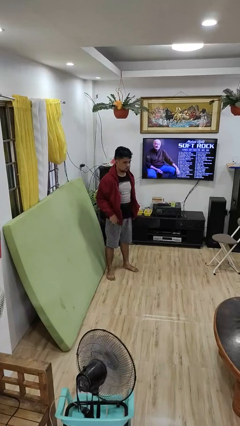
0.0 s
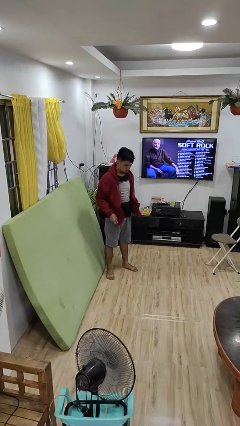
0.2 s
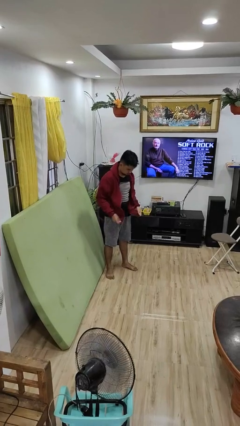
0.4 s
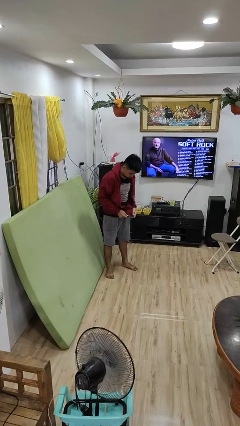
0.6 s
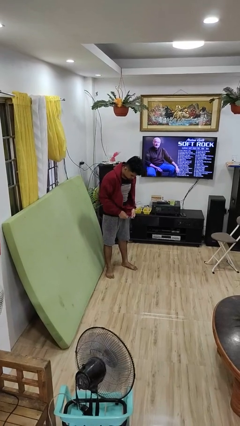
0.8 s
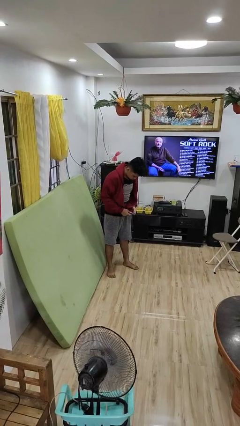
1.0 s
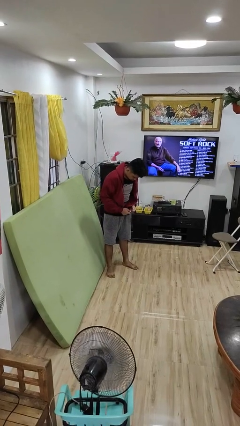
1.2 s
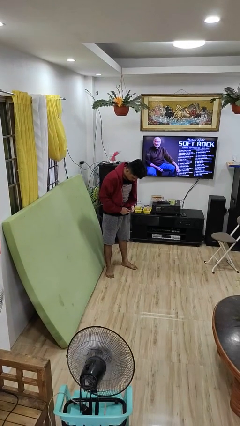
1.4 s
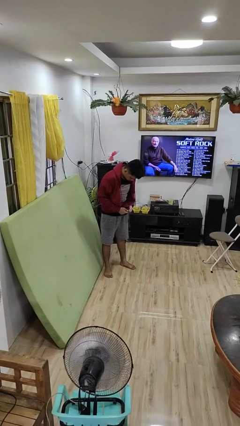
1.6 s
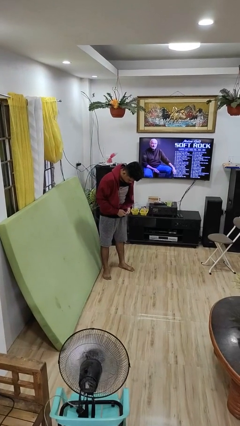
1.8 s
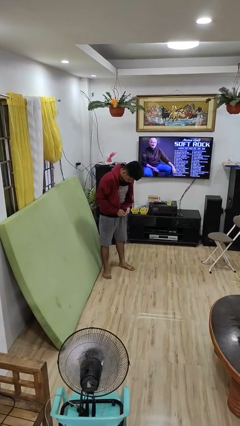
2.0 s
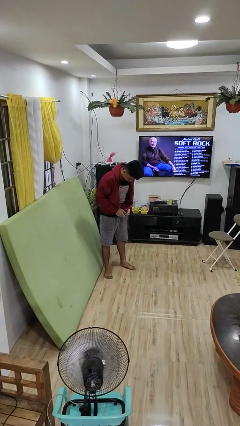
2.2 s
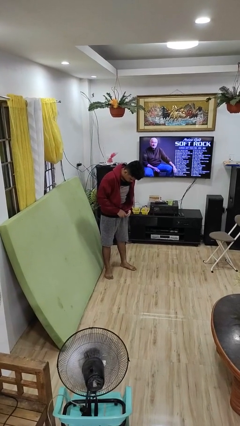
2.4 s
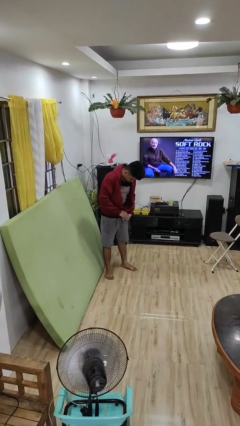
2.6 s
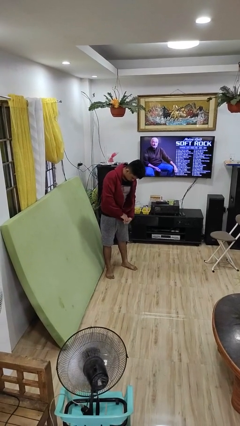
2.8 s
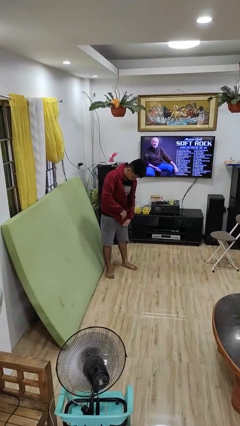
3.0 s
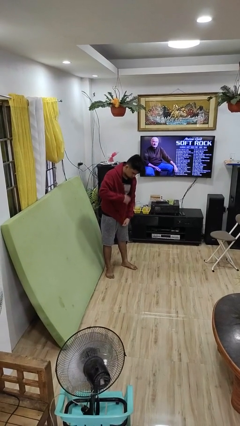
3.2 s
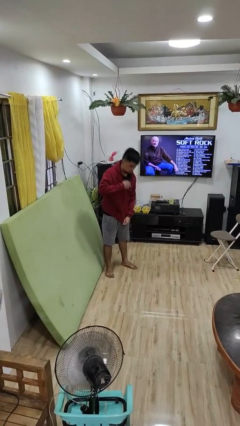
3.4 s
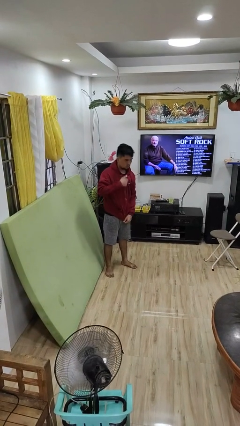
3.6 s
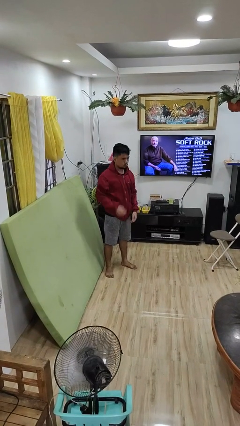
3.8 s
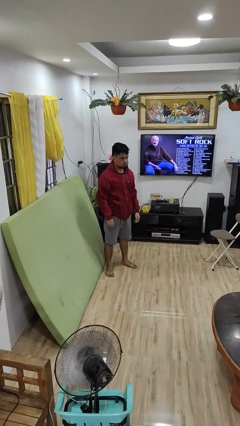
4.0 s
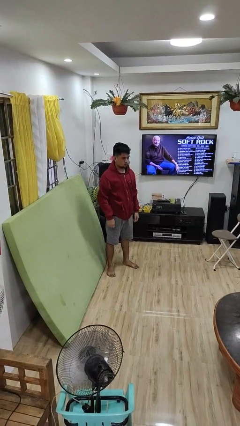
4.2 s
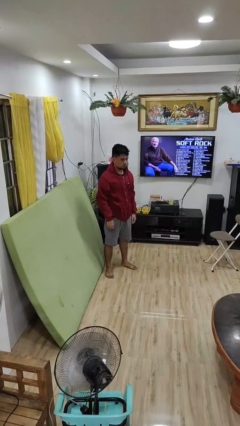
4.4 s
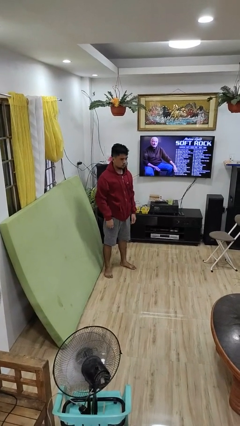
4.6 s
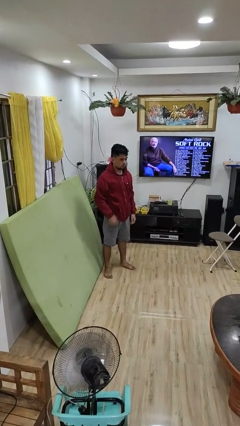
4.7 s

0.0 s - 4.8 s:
person zips up jacket

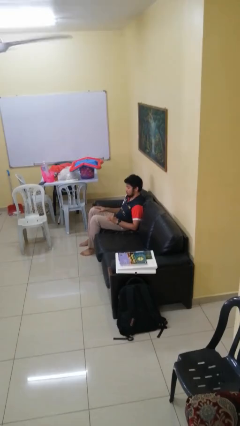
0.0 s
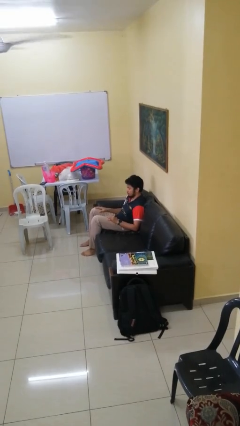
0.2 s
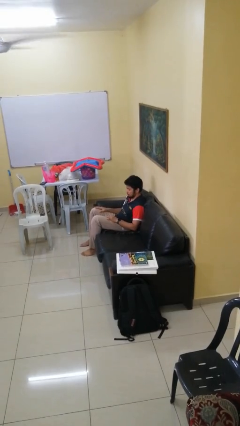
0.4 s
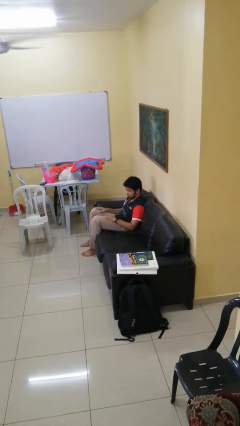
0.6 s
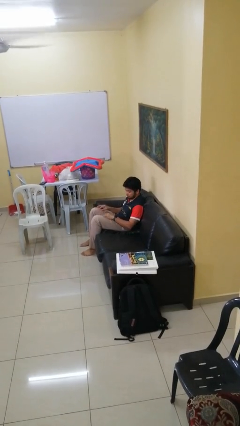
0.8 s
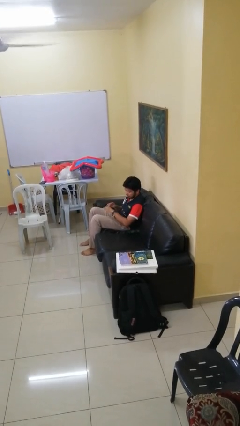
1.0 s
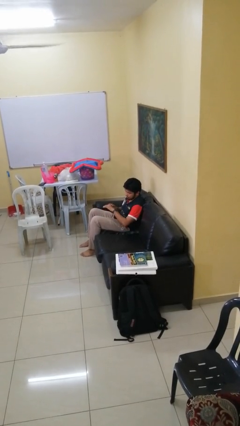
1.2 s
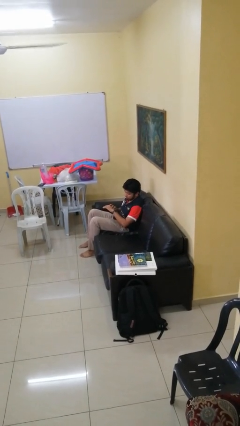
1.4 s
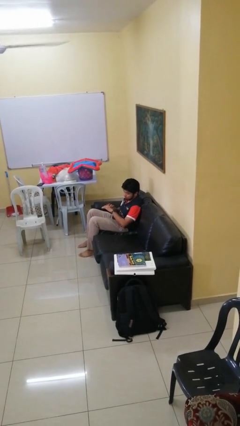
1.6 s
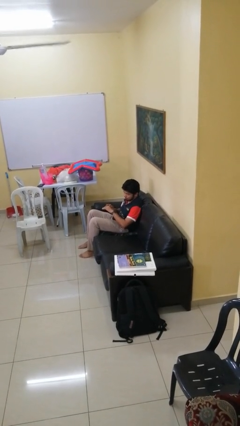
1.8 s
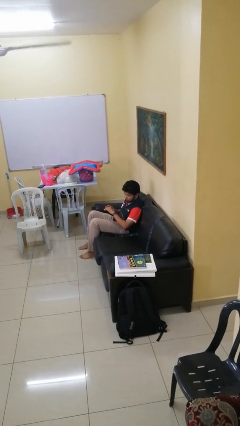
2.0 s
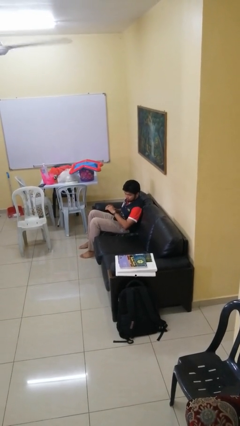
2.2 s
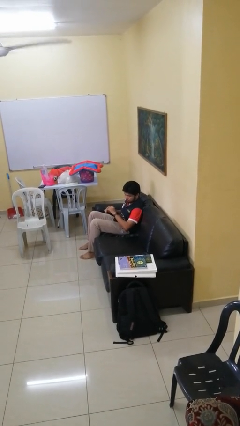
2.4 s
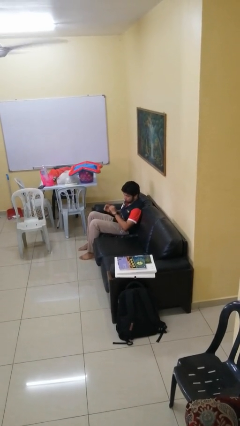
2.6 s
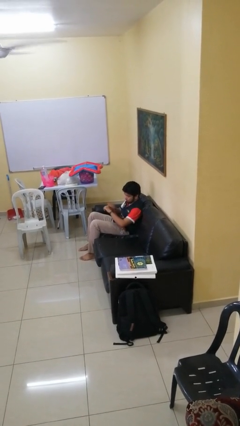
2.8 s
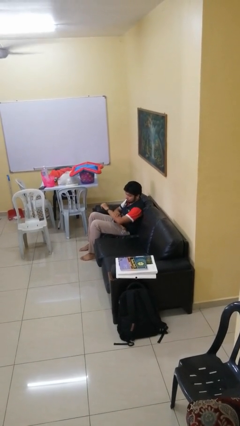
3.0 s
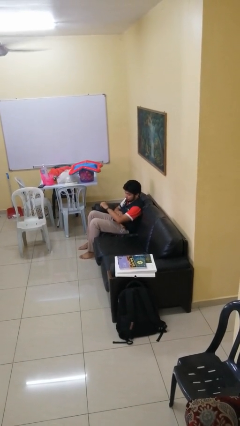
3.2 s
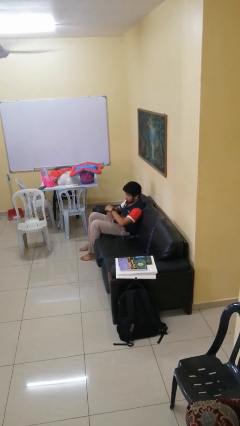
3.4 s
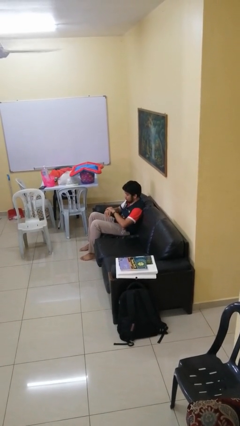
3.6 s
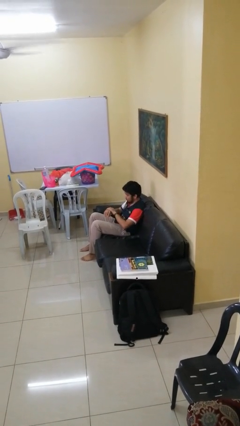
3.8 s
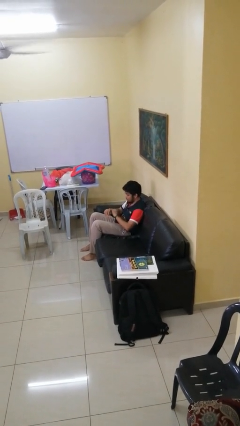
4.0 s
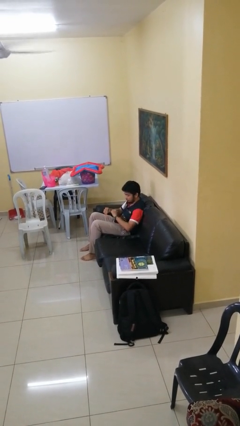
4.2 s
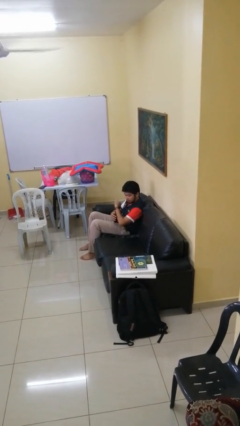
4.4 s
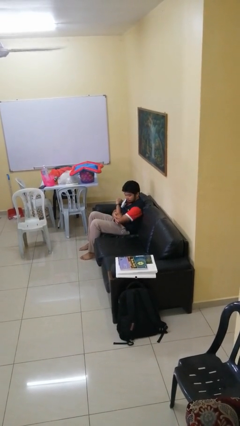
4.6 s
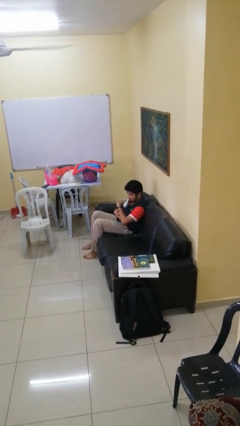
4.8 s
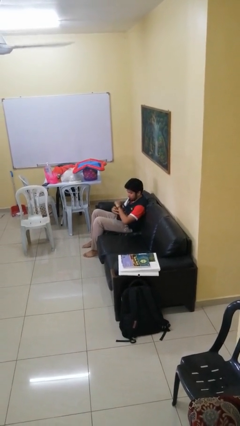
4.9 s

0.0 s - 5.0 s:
person looks at hands in lap

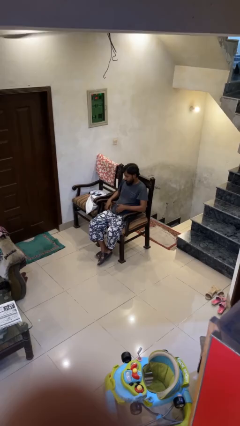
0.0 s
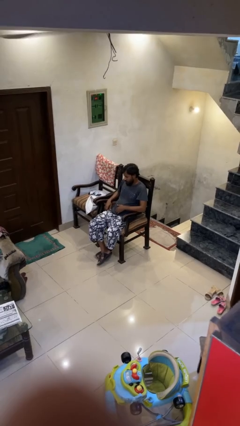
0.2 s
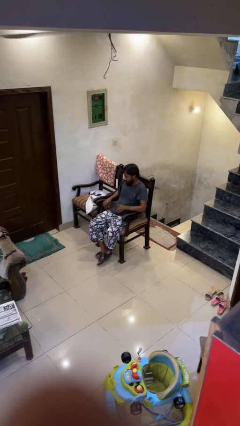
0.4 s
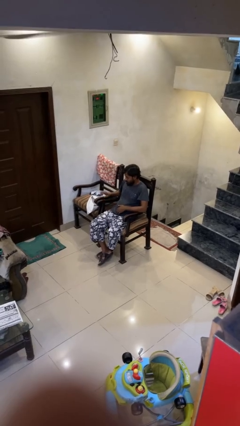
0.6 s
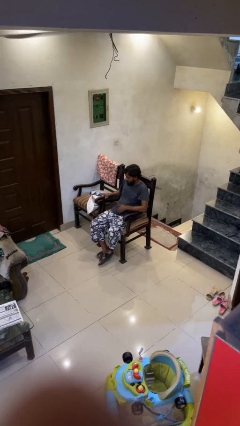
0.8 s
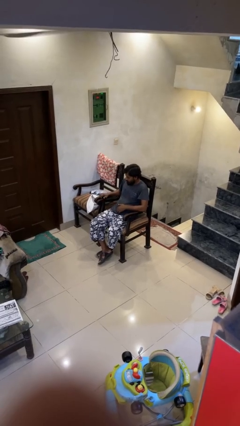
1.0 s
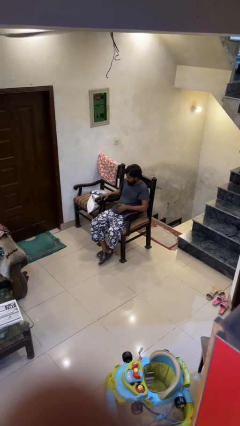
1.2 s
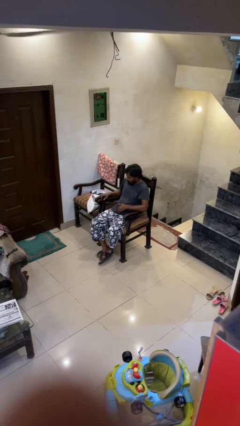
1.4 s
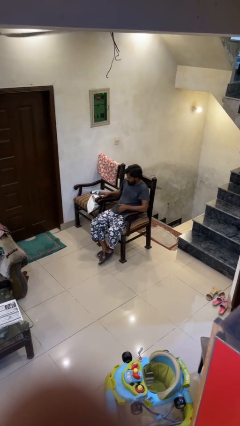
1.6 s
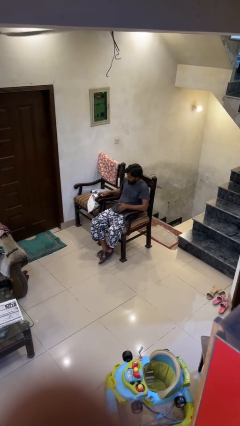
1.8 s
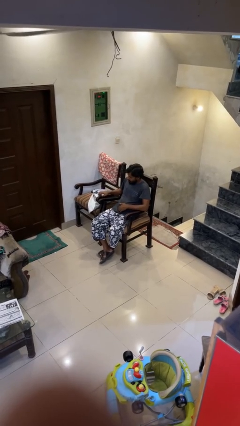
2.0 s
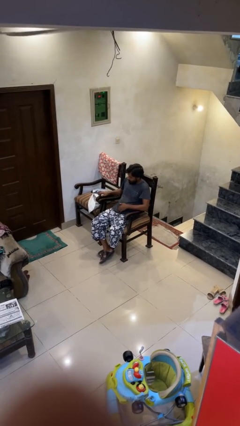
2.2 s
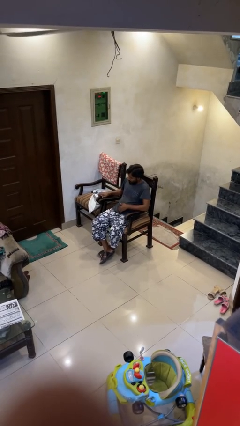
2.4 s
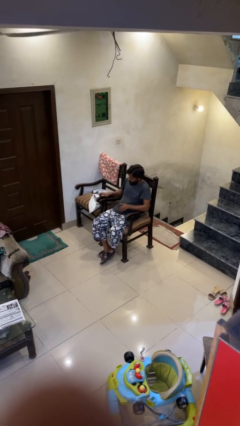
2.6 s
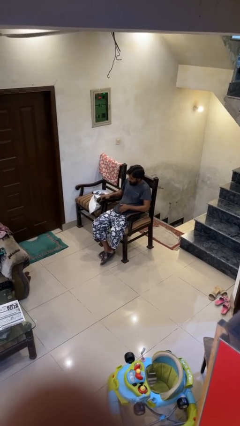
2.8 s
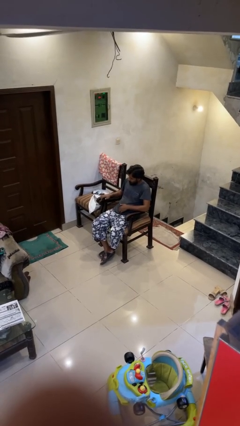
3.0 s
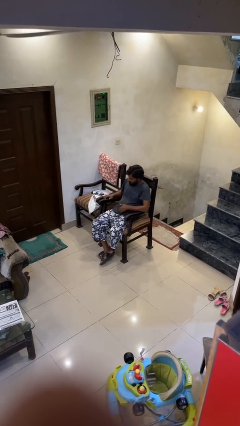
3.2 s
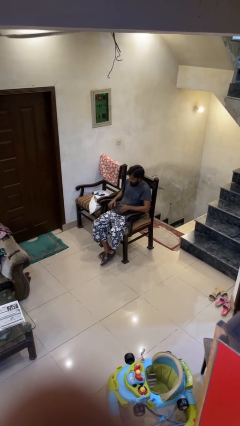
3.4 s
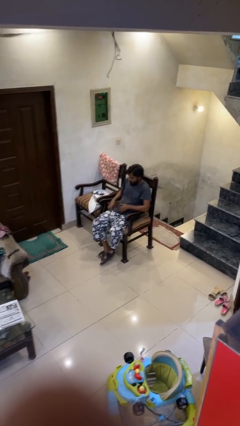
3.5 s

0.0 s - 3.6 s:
person taps object with finger

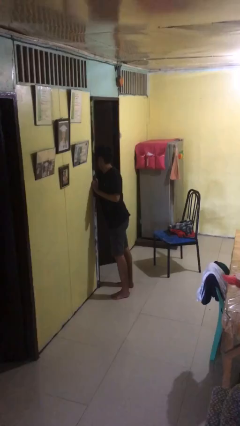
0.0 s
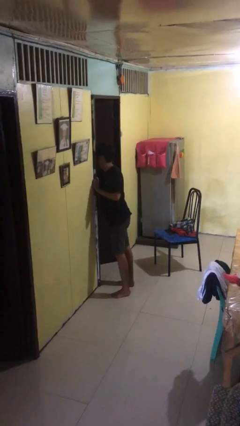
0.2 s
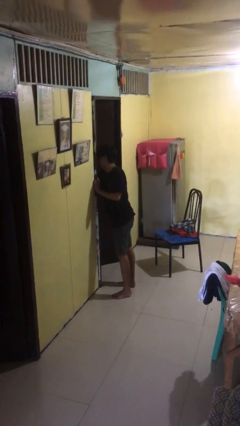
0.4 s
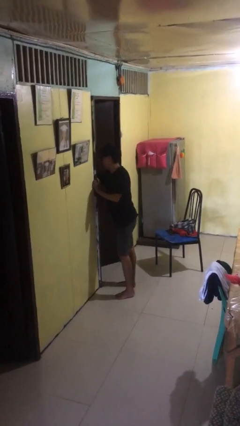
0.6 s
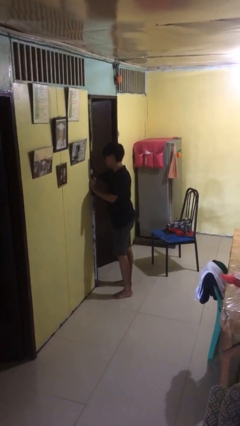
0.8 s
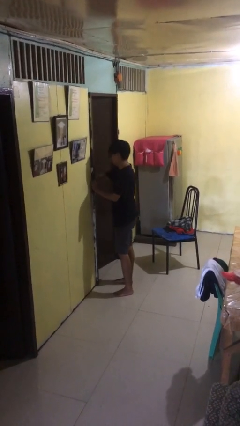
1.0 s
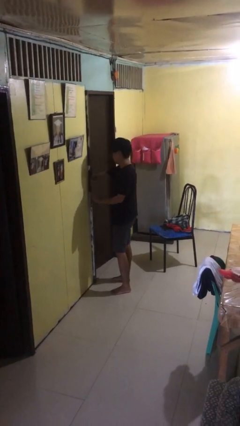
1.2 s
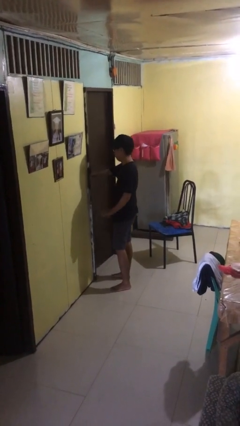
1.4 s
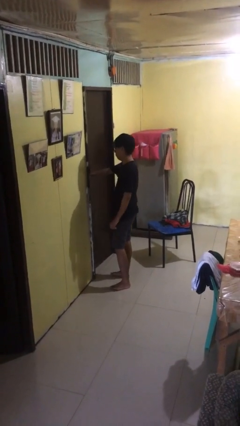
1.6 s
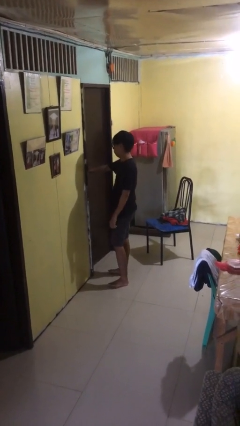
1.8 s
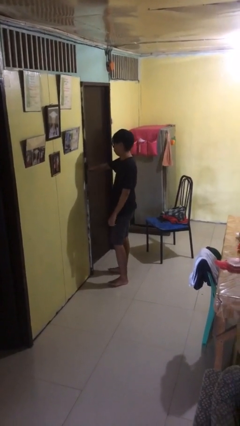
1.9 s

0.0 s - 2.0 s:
person closes facility door

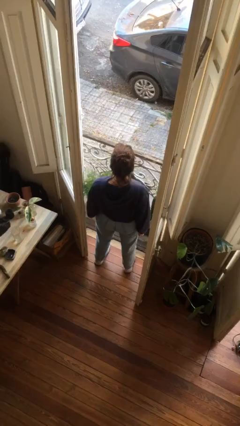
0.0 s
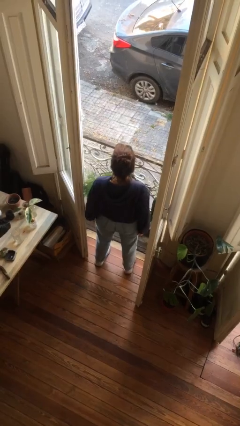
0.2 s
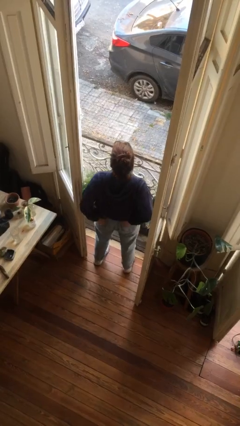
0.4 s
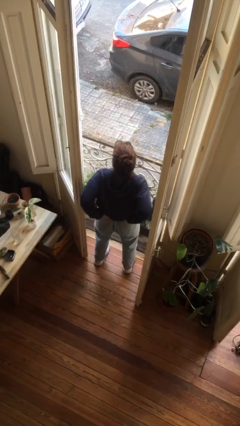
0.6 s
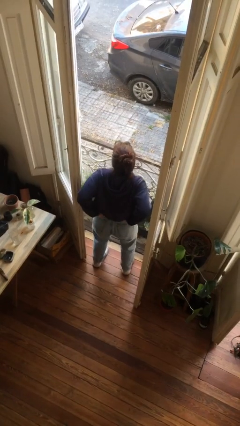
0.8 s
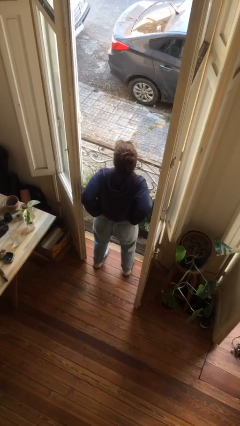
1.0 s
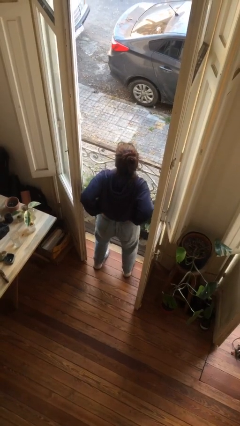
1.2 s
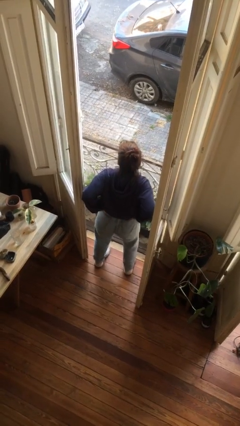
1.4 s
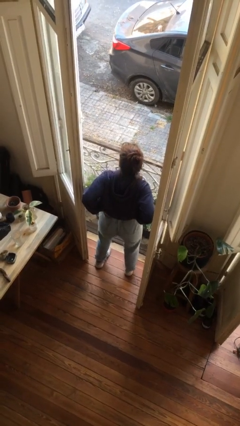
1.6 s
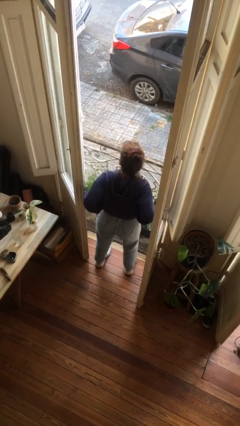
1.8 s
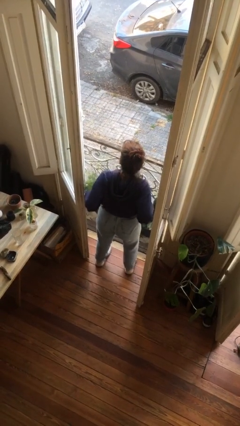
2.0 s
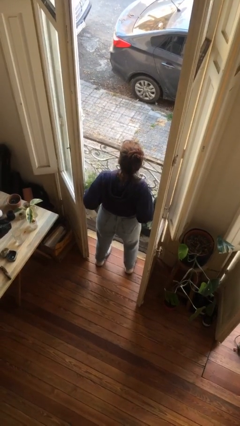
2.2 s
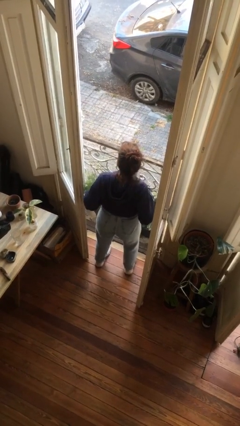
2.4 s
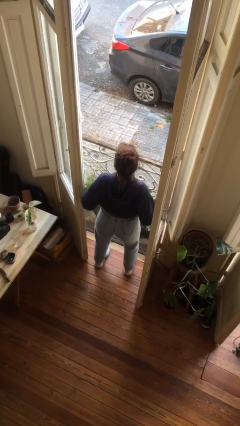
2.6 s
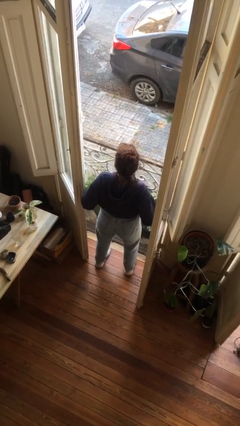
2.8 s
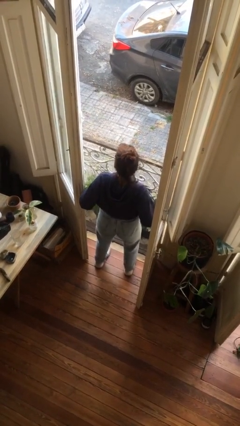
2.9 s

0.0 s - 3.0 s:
person hikes up pants
